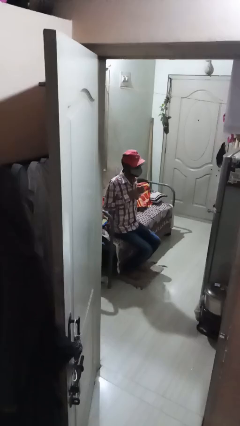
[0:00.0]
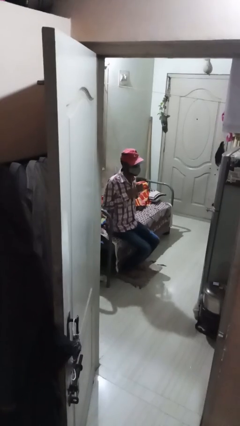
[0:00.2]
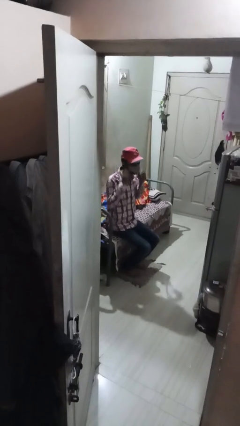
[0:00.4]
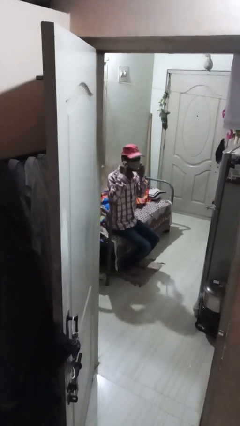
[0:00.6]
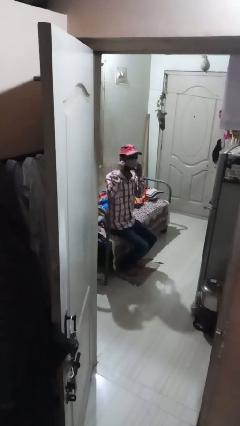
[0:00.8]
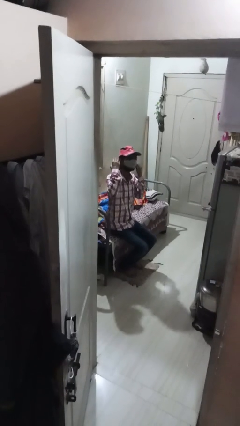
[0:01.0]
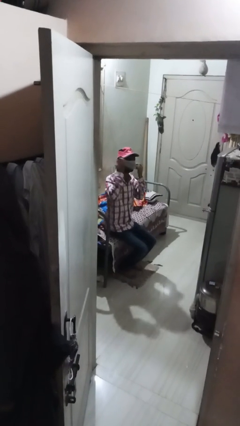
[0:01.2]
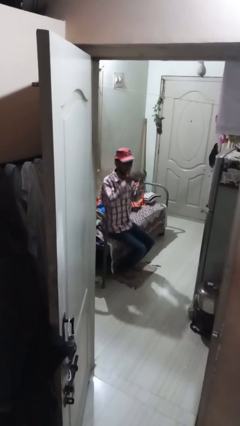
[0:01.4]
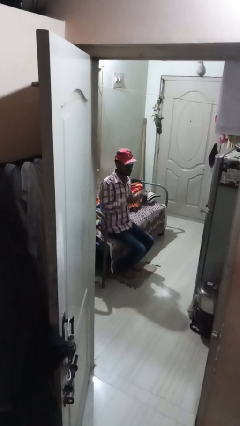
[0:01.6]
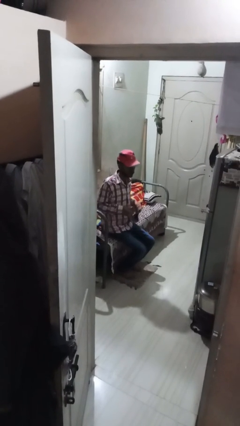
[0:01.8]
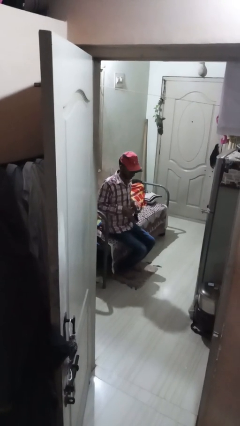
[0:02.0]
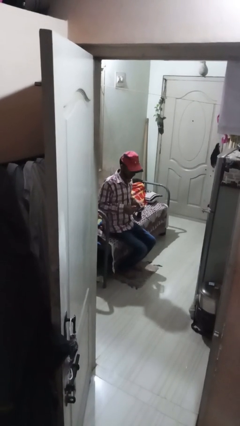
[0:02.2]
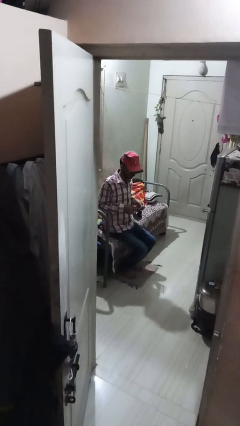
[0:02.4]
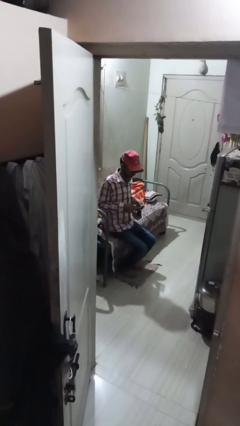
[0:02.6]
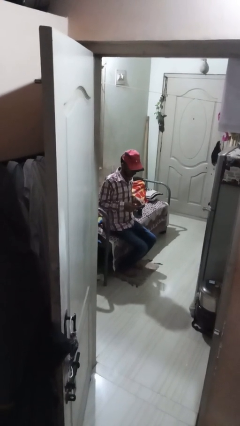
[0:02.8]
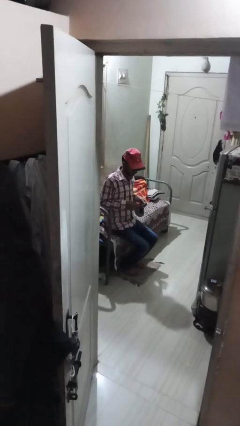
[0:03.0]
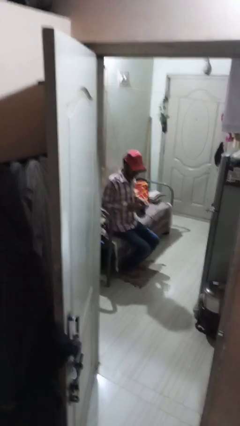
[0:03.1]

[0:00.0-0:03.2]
person takes off facemask

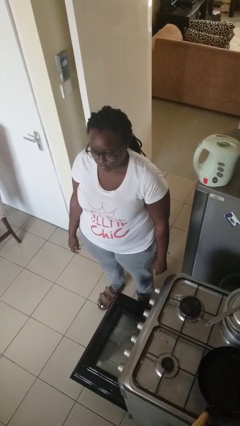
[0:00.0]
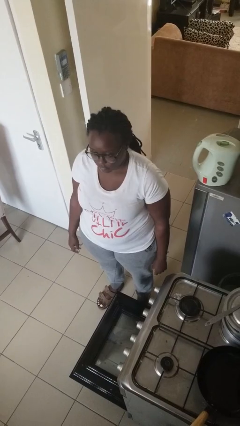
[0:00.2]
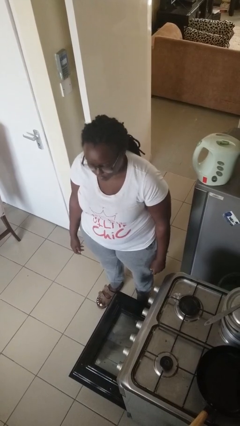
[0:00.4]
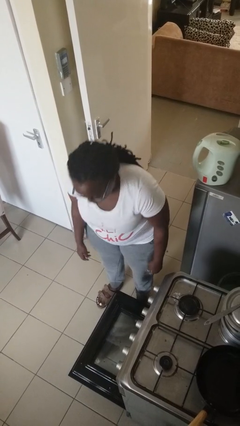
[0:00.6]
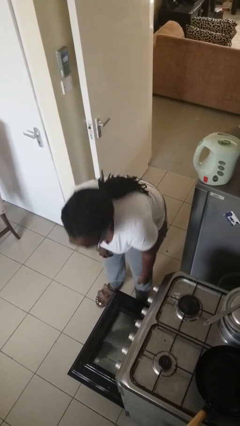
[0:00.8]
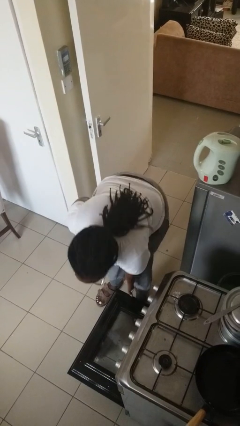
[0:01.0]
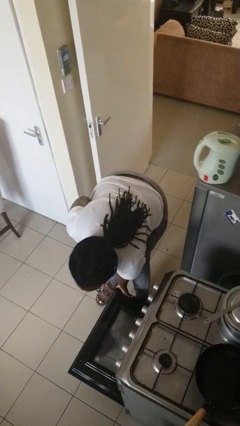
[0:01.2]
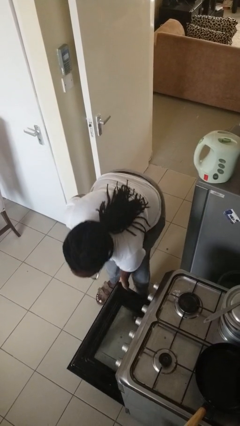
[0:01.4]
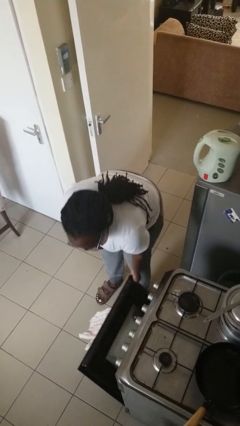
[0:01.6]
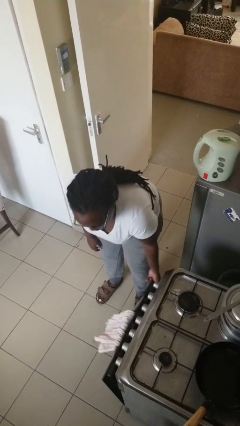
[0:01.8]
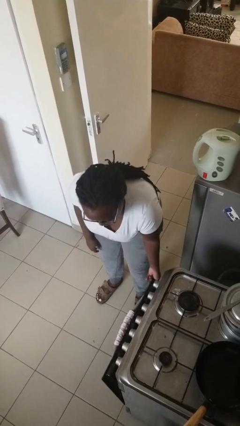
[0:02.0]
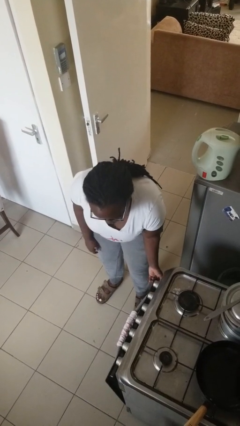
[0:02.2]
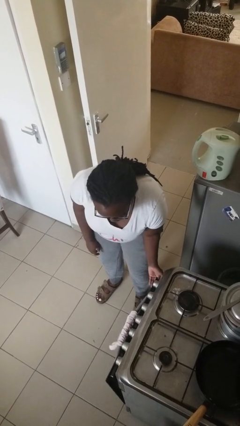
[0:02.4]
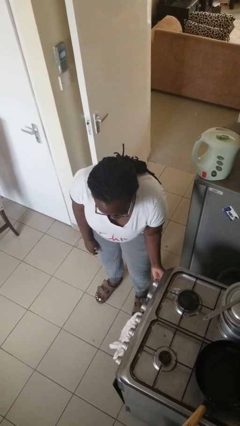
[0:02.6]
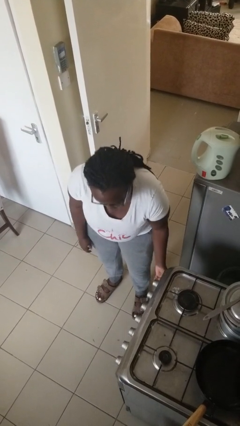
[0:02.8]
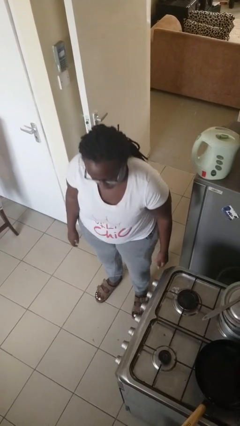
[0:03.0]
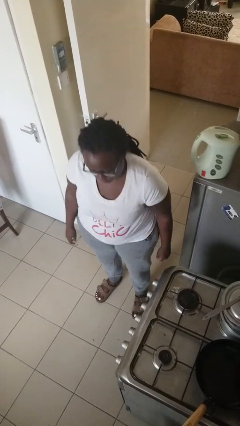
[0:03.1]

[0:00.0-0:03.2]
person closes oven door

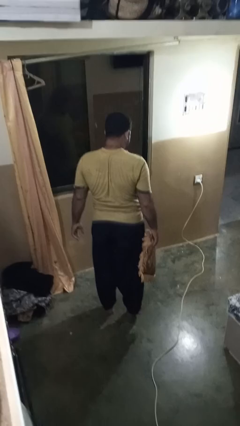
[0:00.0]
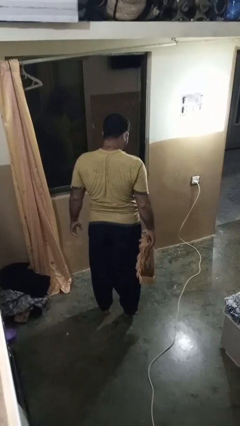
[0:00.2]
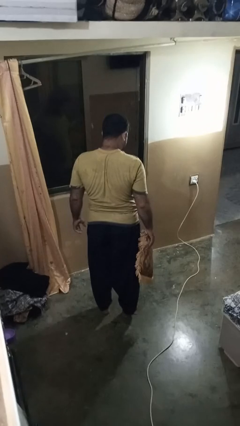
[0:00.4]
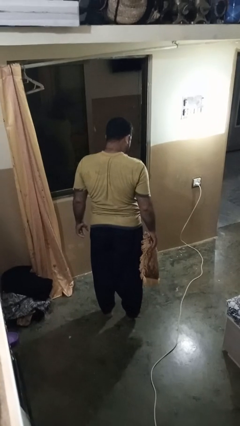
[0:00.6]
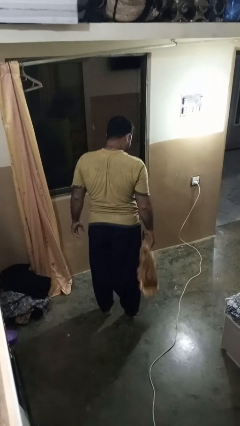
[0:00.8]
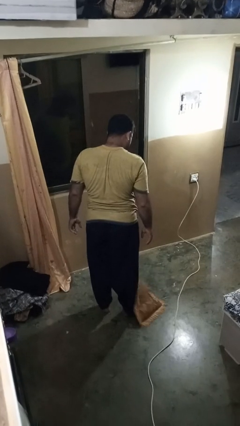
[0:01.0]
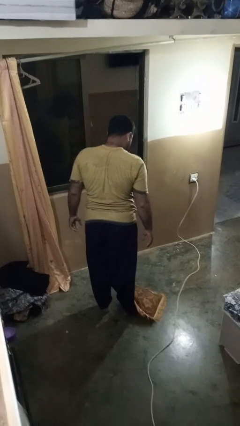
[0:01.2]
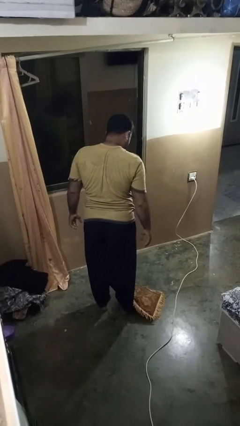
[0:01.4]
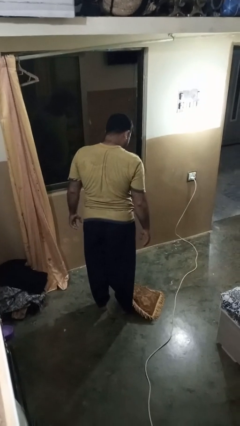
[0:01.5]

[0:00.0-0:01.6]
person drops object

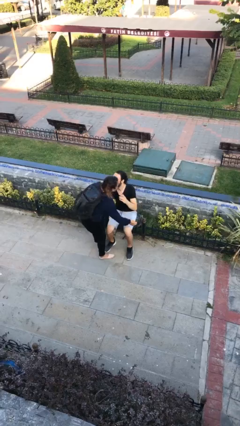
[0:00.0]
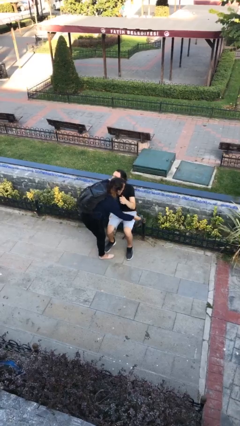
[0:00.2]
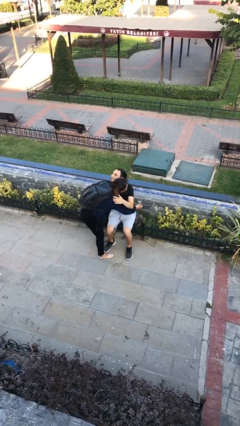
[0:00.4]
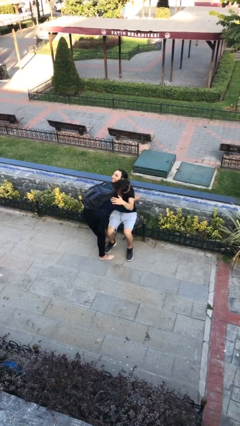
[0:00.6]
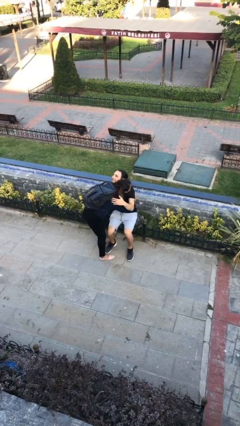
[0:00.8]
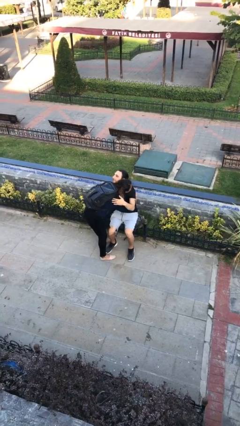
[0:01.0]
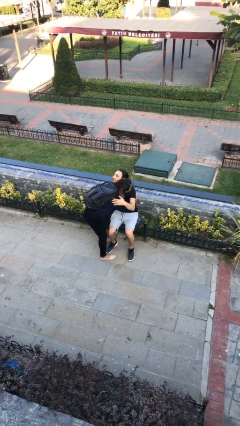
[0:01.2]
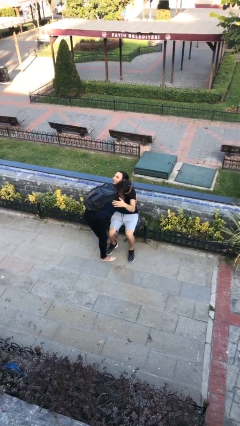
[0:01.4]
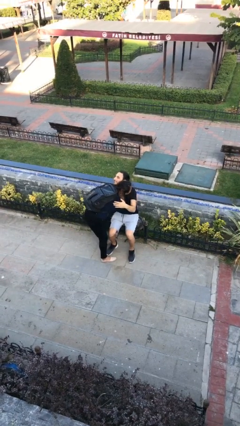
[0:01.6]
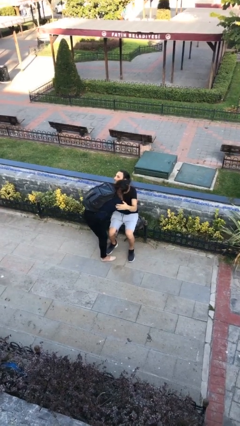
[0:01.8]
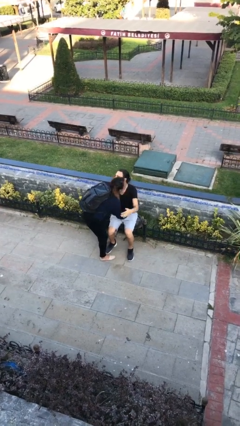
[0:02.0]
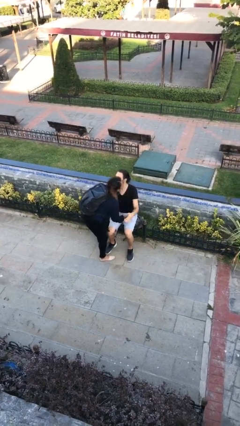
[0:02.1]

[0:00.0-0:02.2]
person embraces person

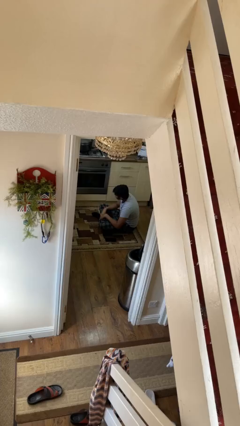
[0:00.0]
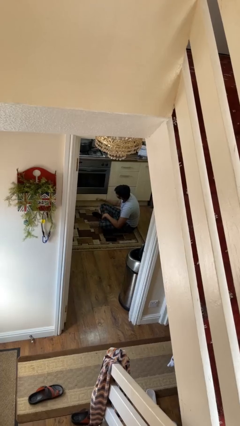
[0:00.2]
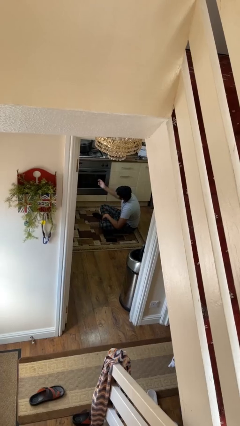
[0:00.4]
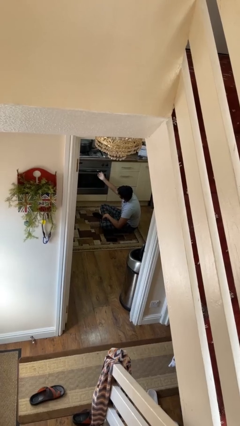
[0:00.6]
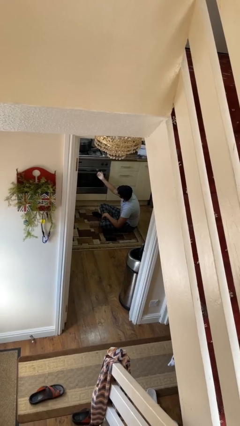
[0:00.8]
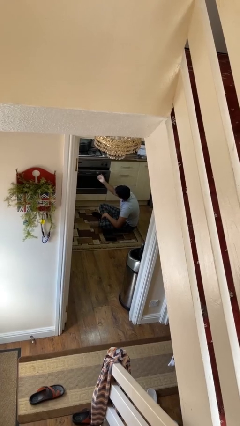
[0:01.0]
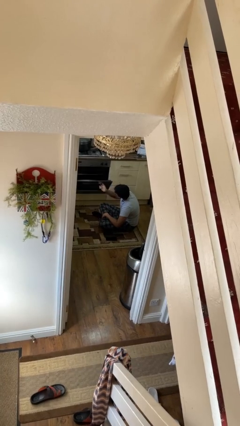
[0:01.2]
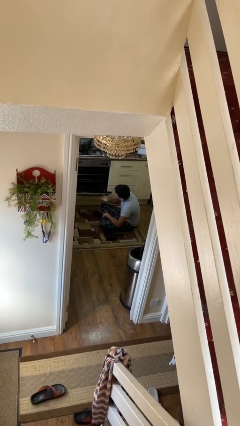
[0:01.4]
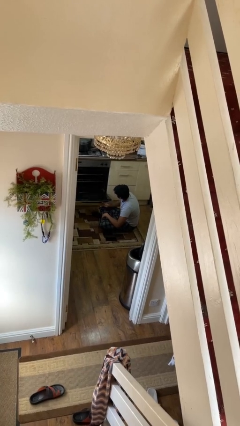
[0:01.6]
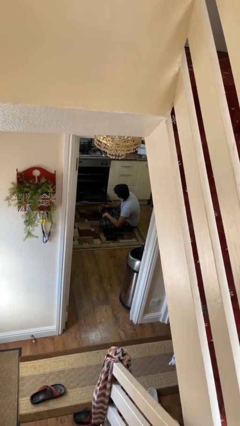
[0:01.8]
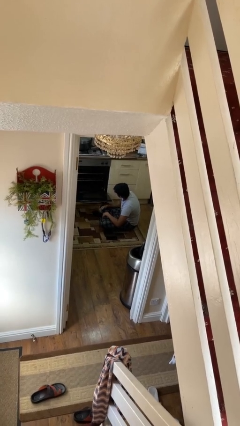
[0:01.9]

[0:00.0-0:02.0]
person opens oven door

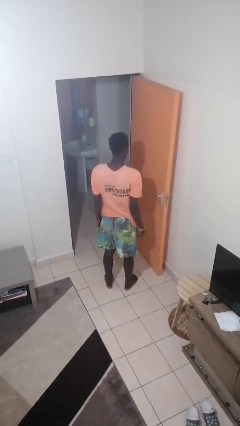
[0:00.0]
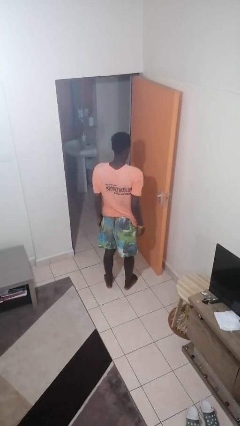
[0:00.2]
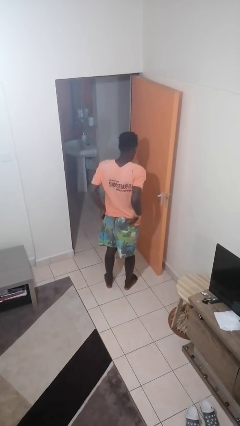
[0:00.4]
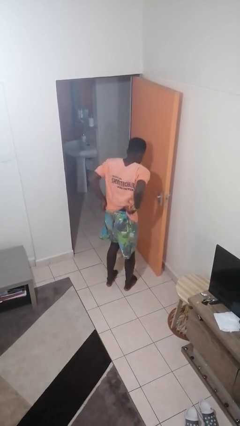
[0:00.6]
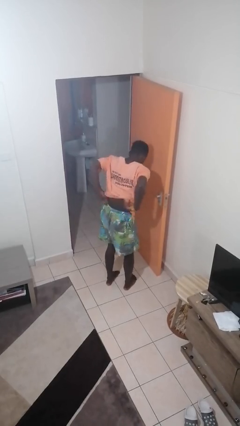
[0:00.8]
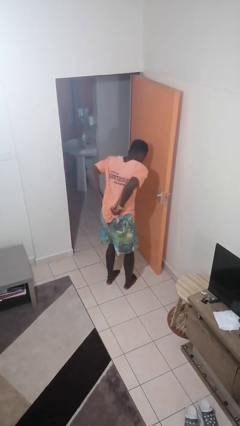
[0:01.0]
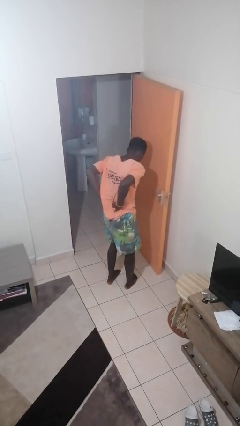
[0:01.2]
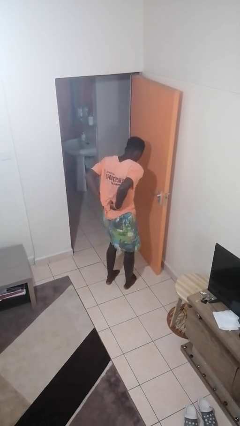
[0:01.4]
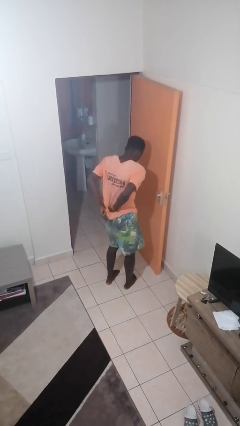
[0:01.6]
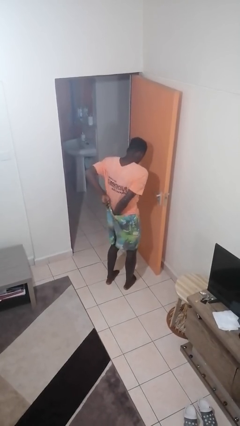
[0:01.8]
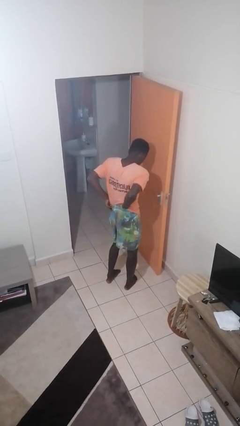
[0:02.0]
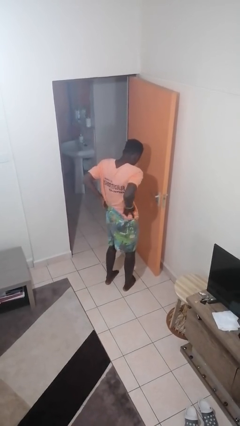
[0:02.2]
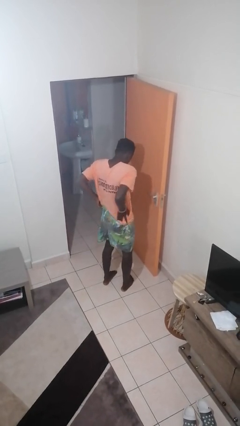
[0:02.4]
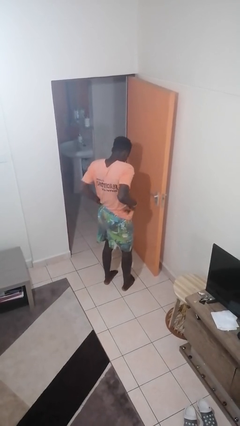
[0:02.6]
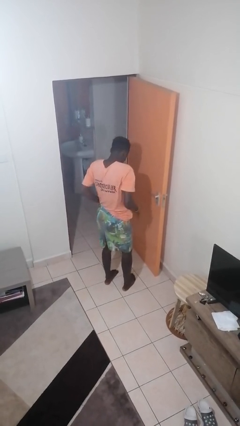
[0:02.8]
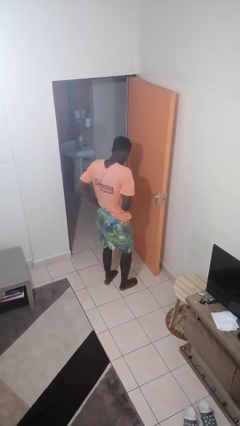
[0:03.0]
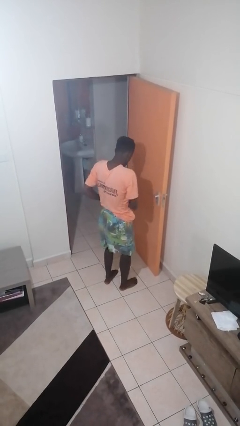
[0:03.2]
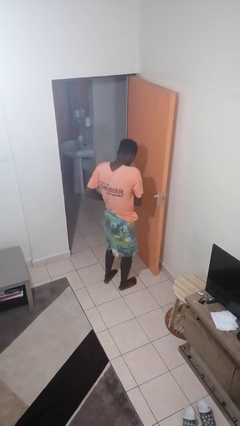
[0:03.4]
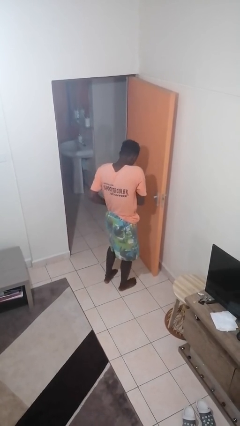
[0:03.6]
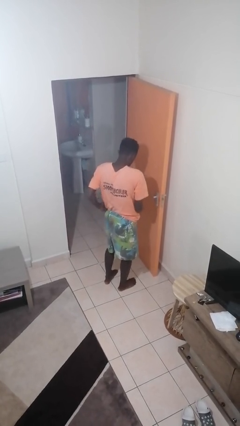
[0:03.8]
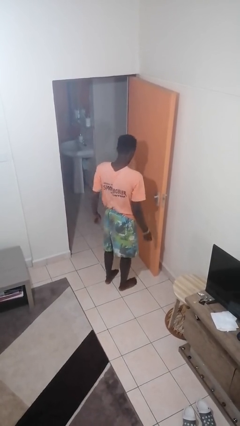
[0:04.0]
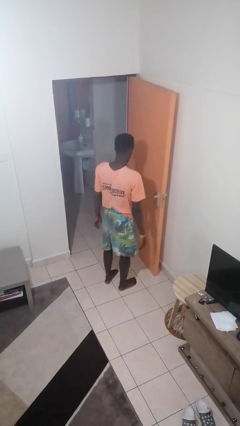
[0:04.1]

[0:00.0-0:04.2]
person tucks in shirt

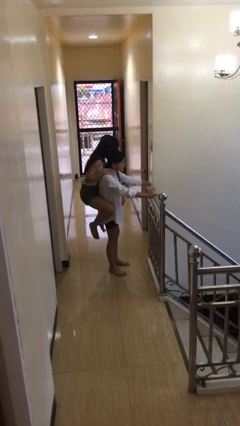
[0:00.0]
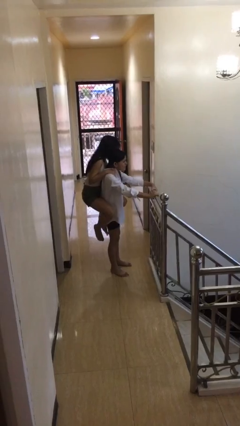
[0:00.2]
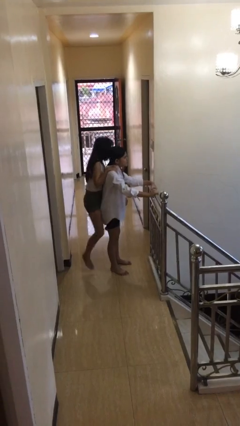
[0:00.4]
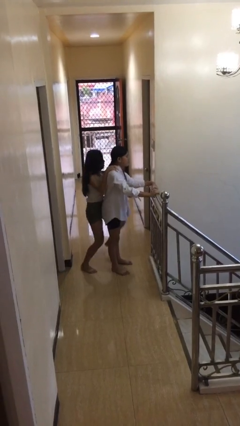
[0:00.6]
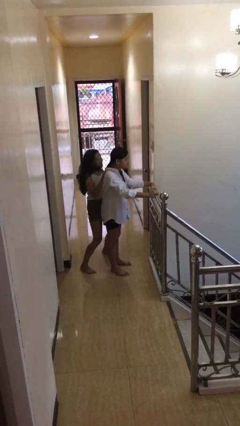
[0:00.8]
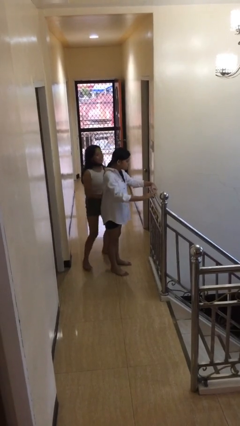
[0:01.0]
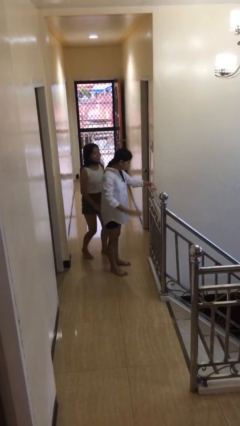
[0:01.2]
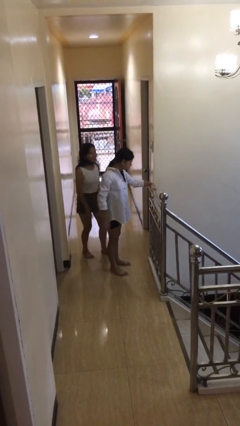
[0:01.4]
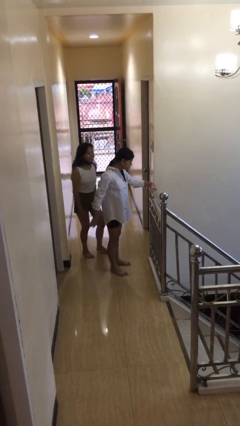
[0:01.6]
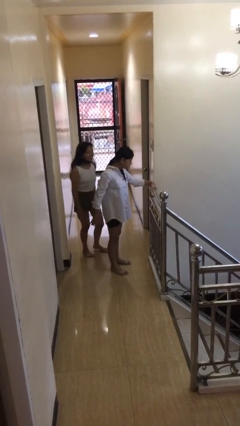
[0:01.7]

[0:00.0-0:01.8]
person puts down person
